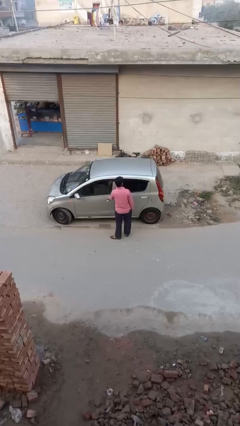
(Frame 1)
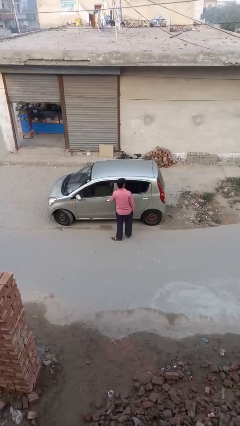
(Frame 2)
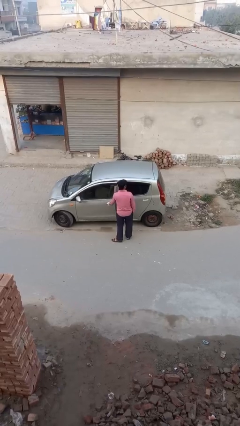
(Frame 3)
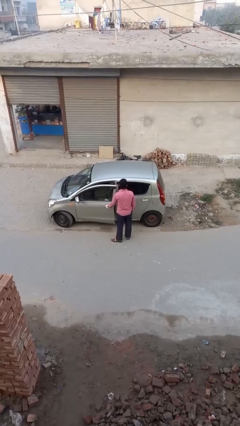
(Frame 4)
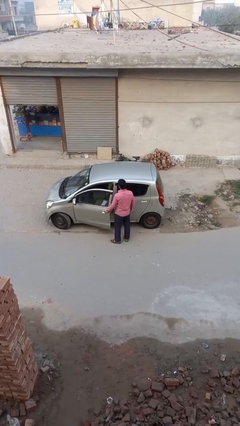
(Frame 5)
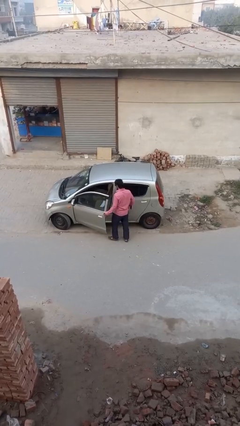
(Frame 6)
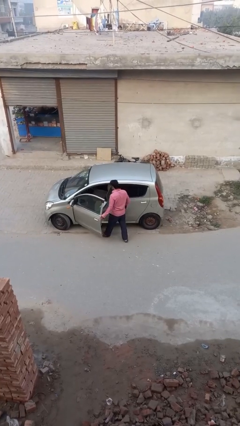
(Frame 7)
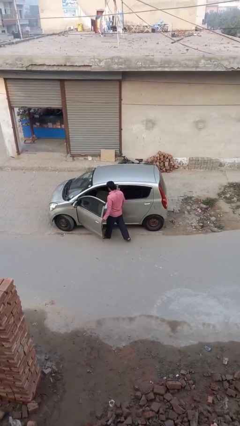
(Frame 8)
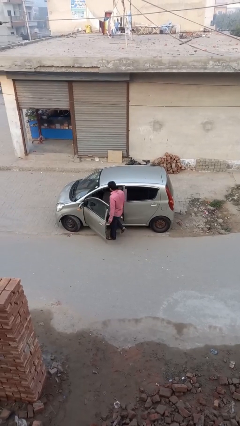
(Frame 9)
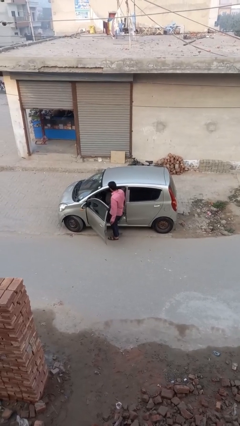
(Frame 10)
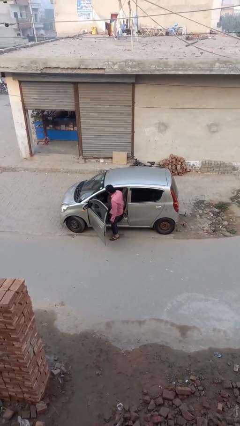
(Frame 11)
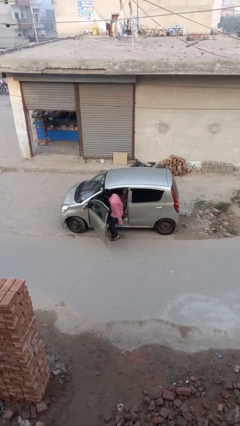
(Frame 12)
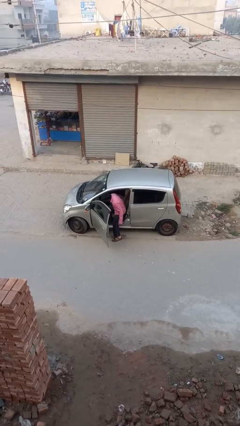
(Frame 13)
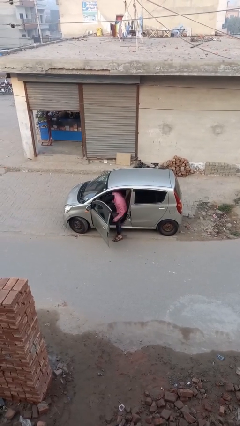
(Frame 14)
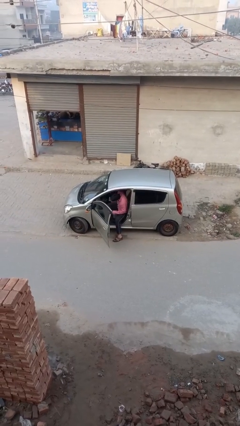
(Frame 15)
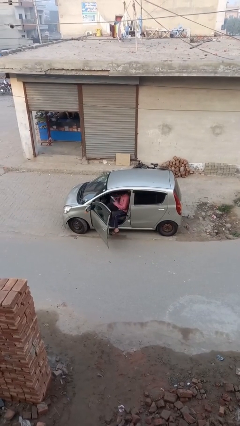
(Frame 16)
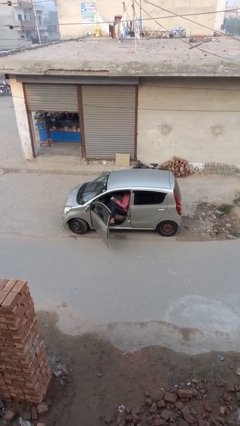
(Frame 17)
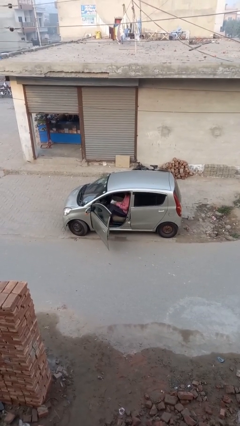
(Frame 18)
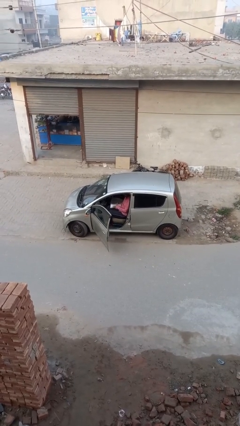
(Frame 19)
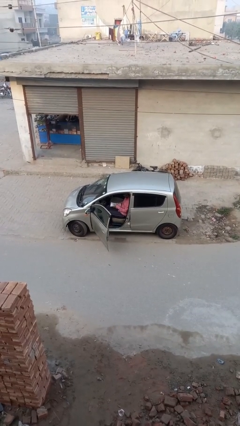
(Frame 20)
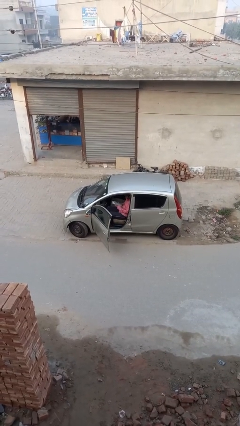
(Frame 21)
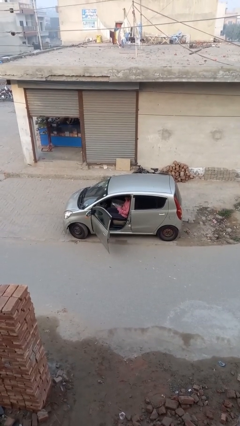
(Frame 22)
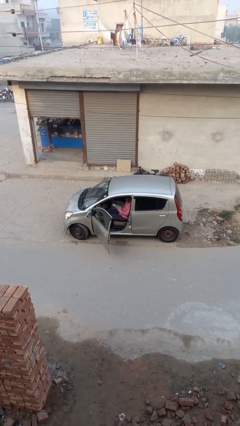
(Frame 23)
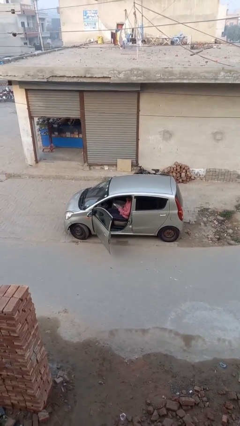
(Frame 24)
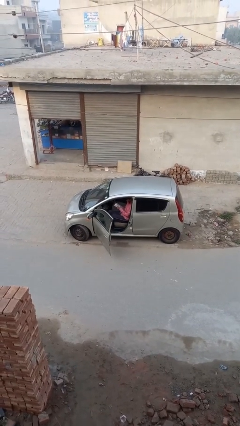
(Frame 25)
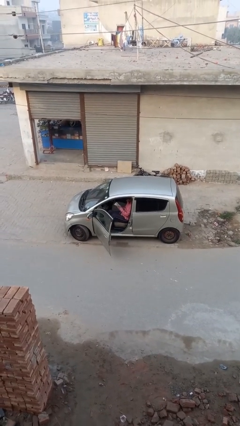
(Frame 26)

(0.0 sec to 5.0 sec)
person enters car

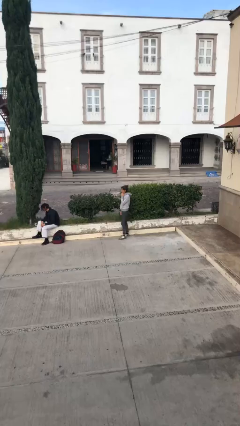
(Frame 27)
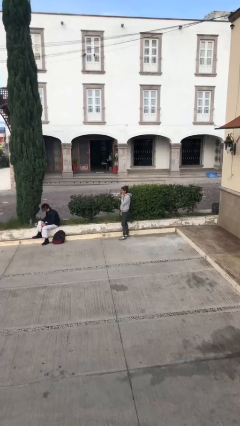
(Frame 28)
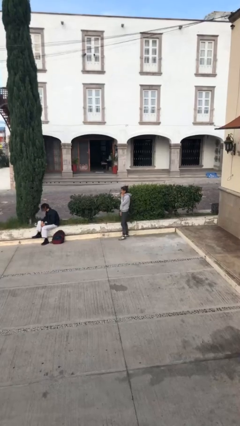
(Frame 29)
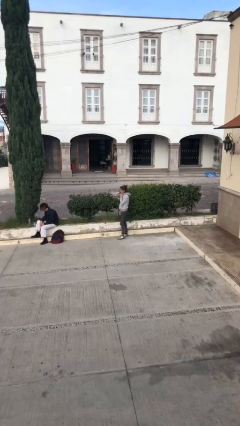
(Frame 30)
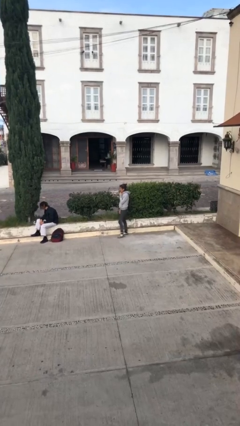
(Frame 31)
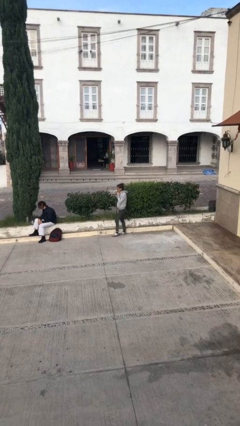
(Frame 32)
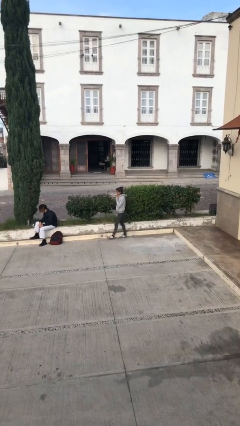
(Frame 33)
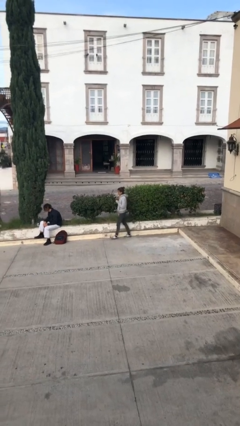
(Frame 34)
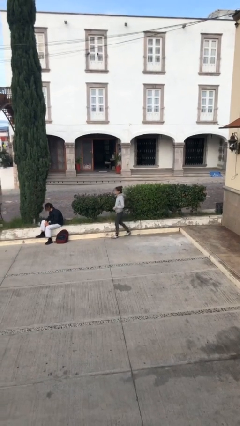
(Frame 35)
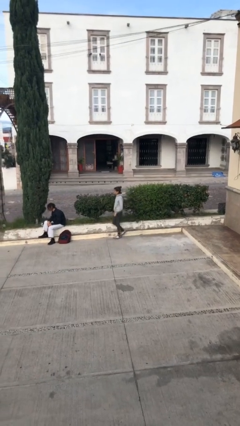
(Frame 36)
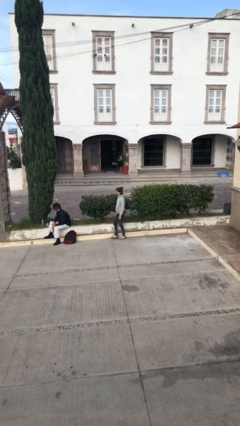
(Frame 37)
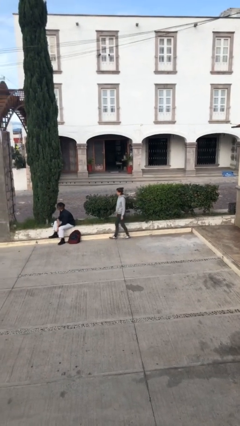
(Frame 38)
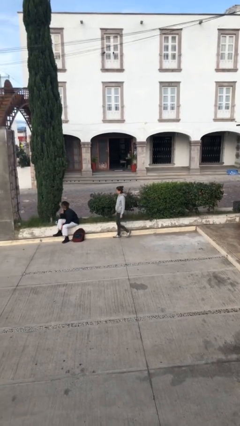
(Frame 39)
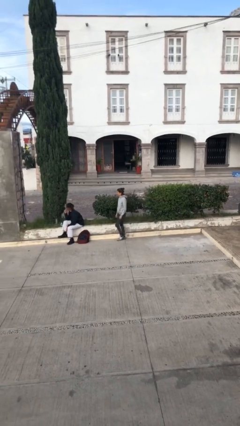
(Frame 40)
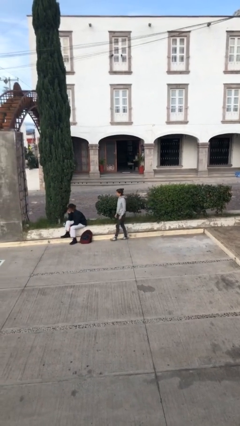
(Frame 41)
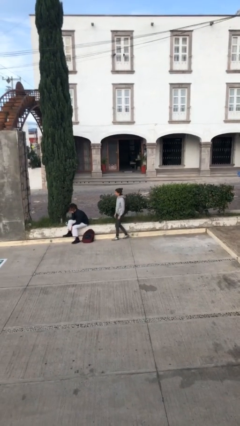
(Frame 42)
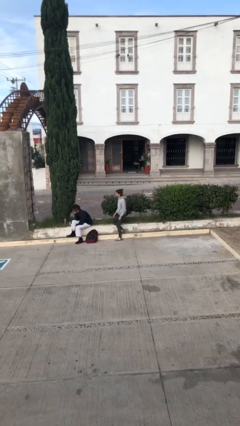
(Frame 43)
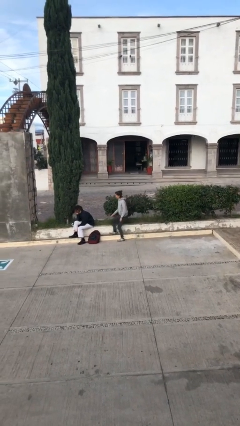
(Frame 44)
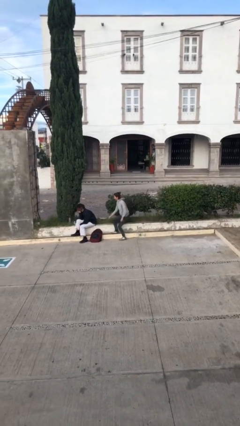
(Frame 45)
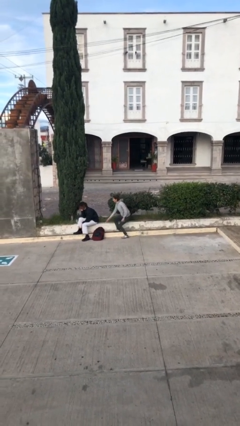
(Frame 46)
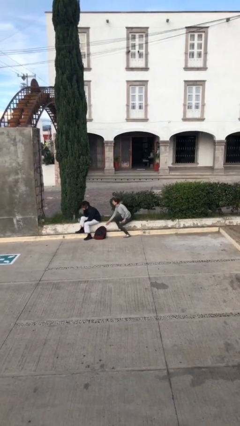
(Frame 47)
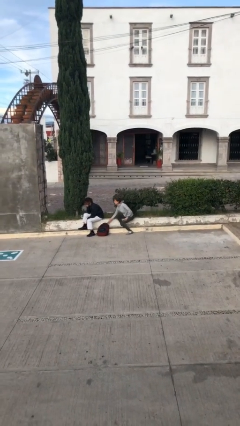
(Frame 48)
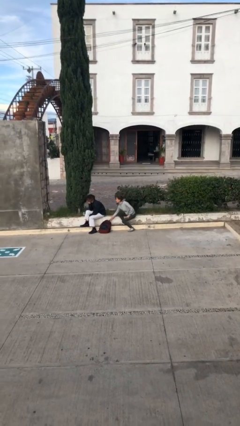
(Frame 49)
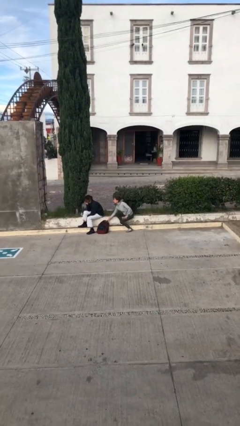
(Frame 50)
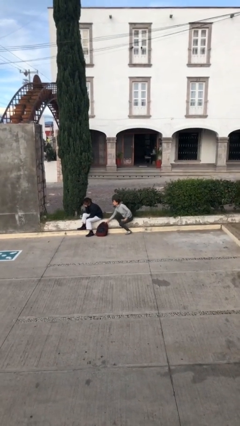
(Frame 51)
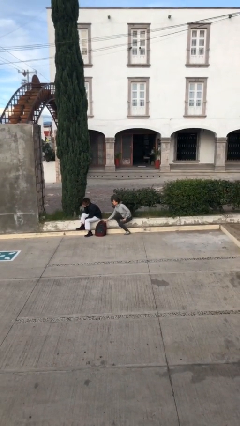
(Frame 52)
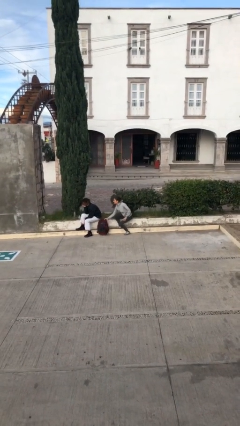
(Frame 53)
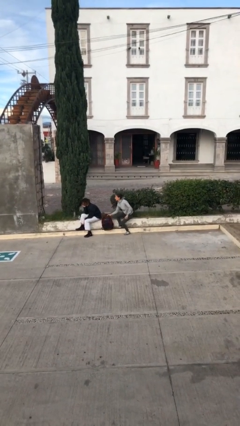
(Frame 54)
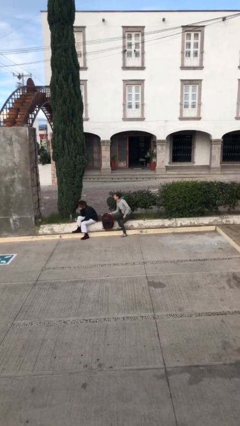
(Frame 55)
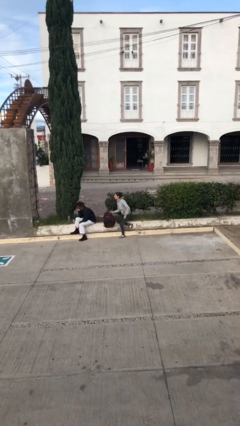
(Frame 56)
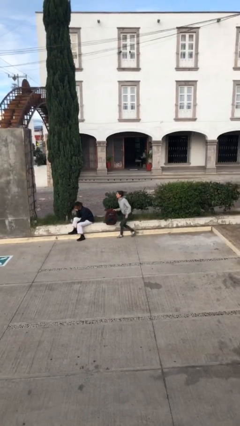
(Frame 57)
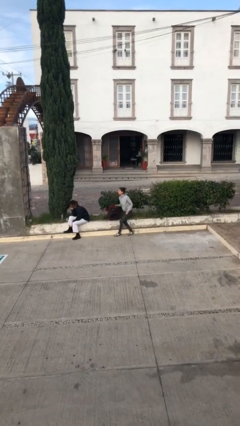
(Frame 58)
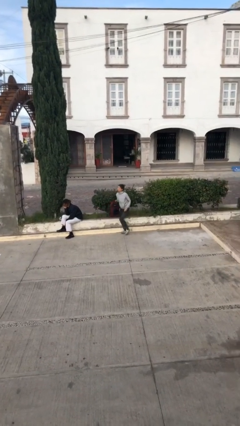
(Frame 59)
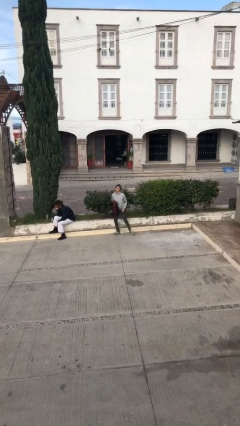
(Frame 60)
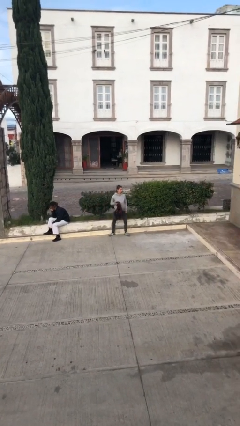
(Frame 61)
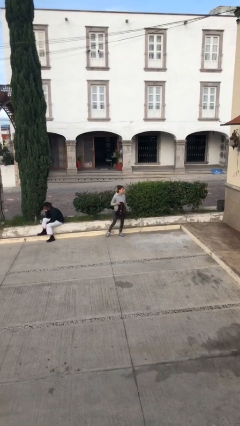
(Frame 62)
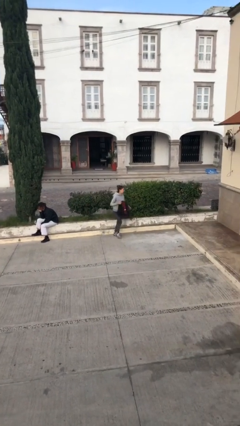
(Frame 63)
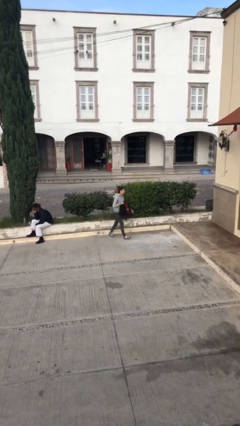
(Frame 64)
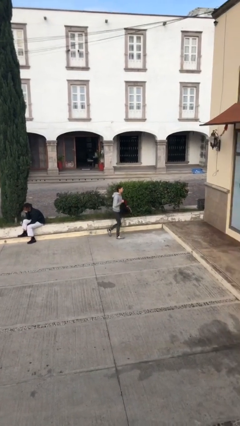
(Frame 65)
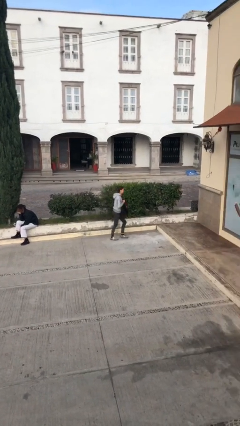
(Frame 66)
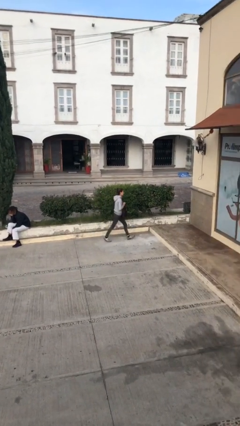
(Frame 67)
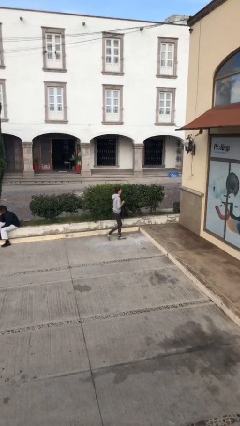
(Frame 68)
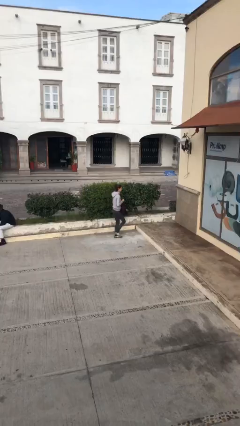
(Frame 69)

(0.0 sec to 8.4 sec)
person steals object from person

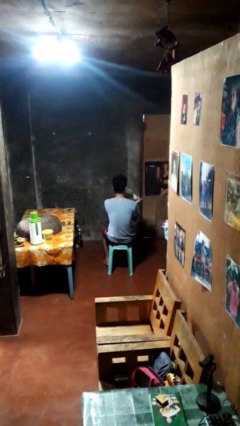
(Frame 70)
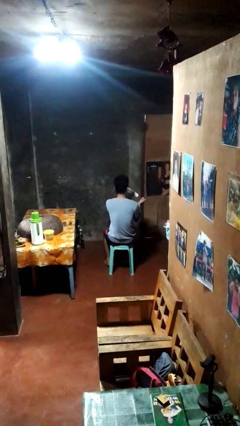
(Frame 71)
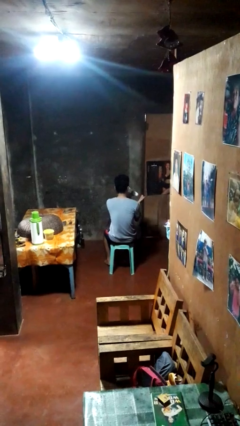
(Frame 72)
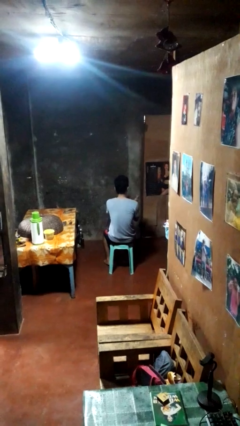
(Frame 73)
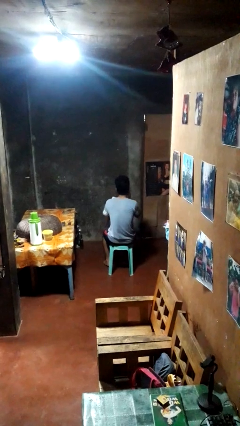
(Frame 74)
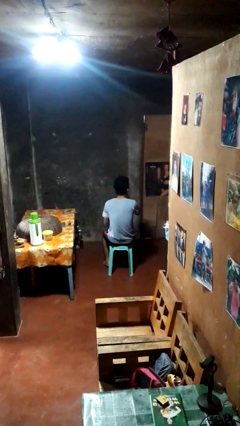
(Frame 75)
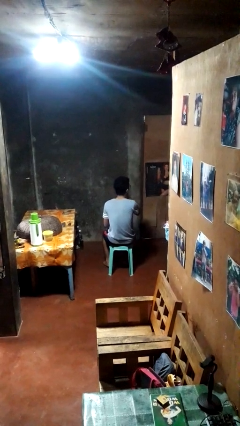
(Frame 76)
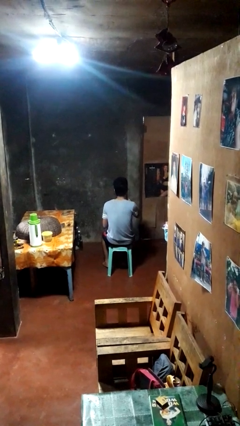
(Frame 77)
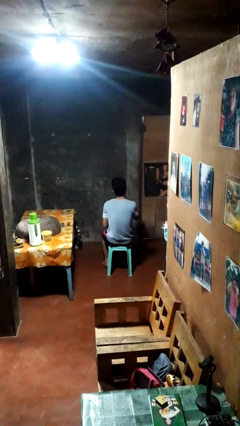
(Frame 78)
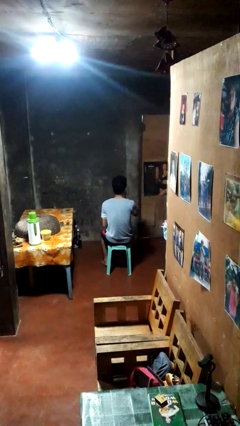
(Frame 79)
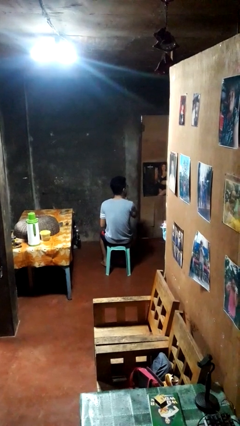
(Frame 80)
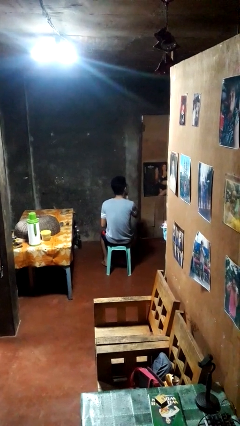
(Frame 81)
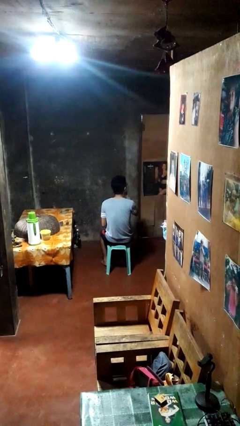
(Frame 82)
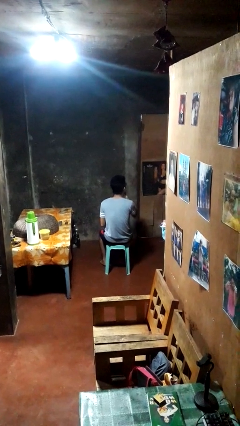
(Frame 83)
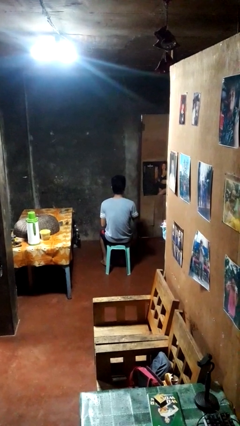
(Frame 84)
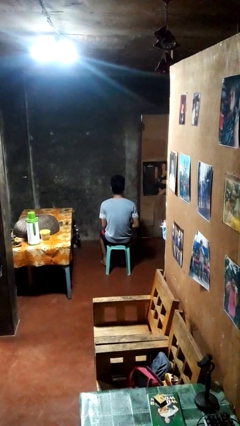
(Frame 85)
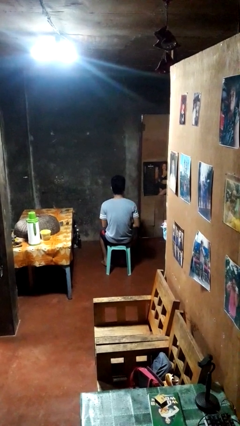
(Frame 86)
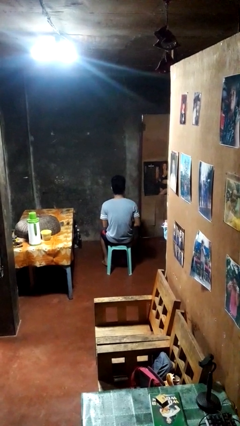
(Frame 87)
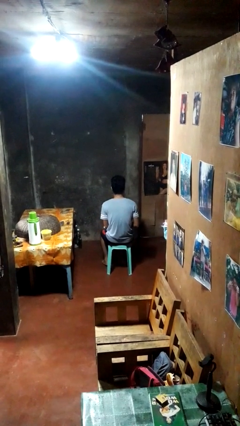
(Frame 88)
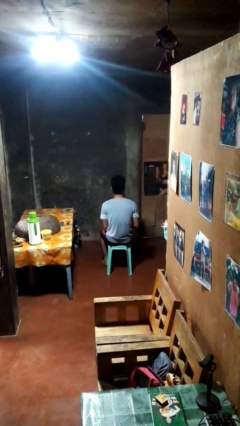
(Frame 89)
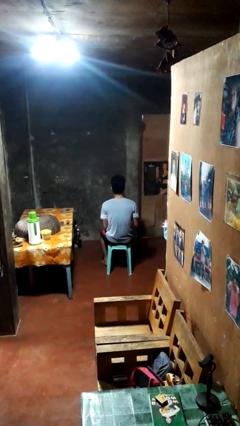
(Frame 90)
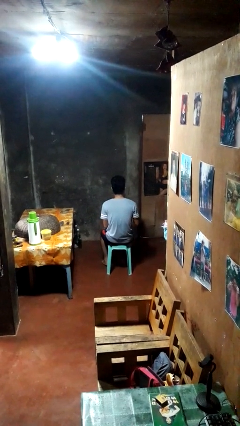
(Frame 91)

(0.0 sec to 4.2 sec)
person applies shaving cream
